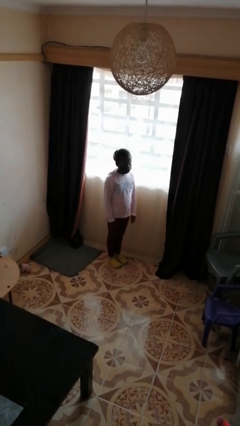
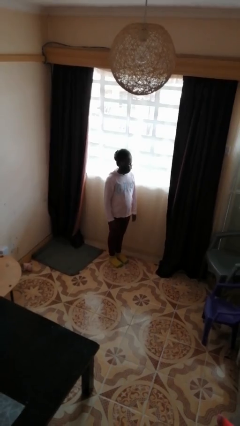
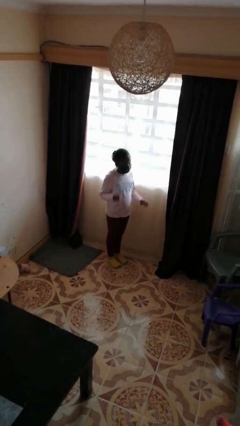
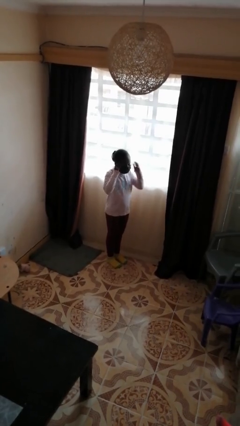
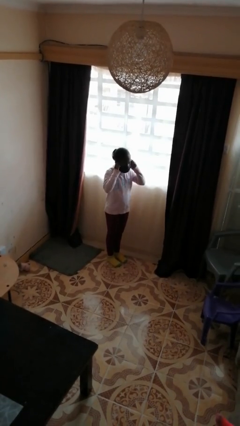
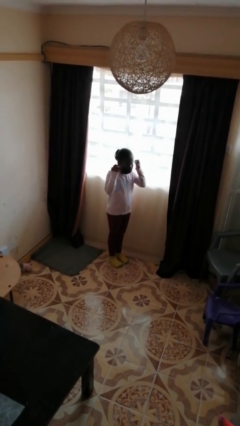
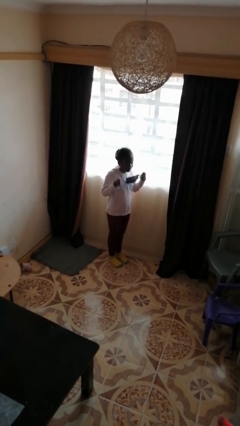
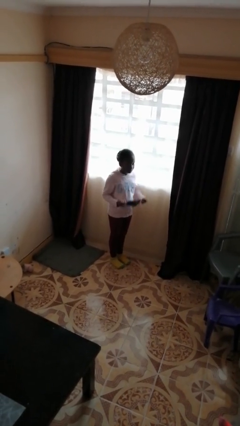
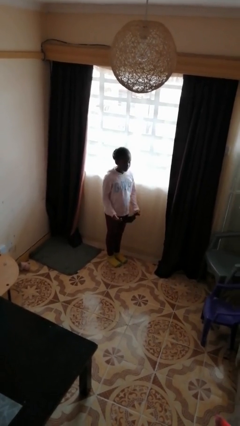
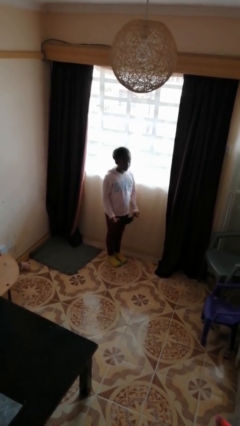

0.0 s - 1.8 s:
person takes off facemask

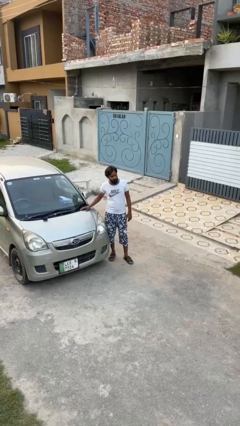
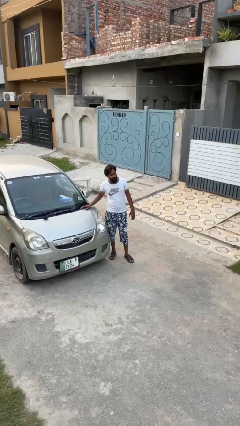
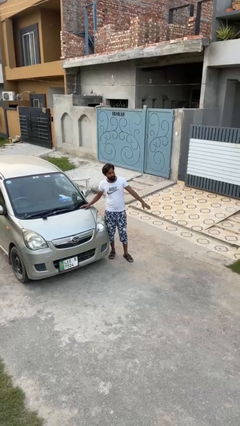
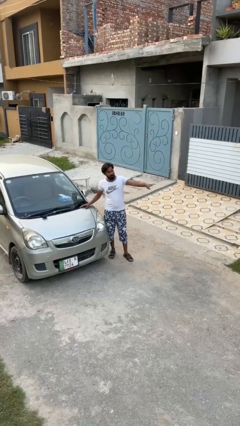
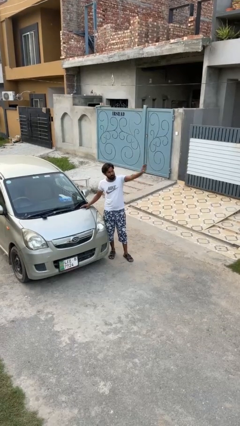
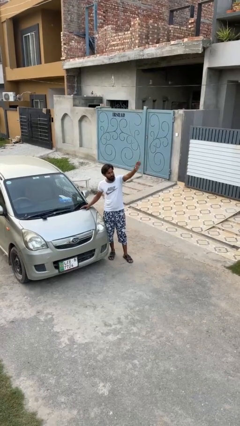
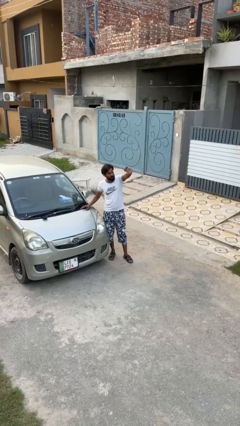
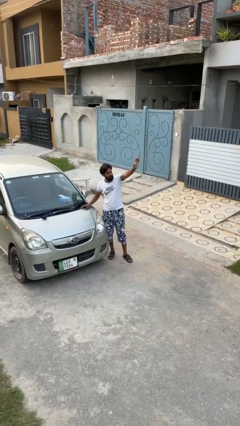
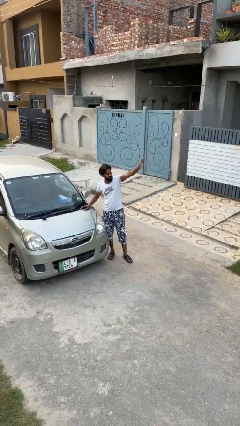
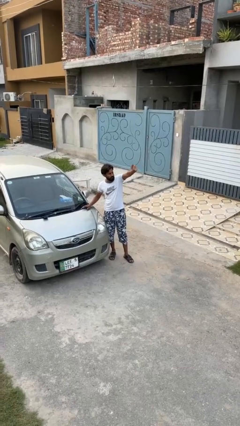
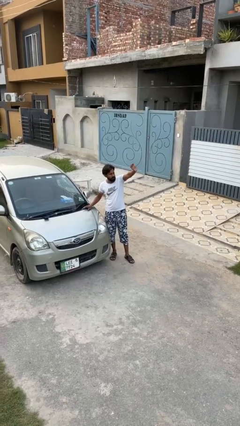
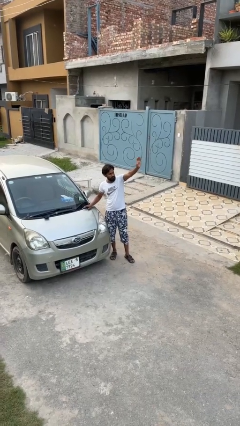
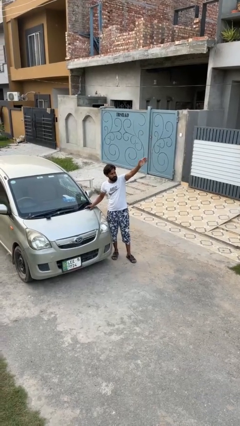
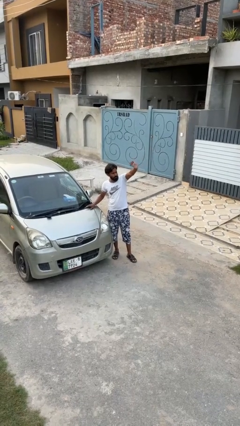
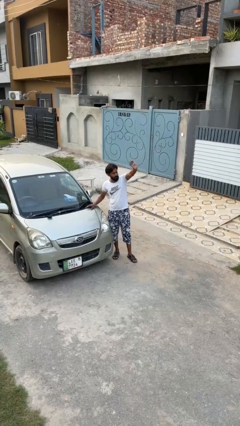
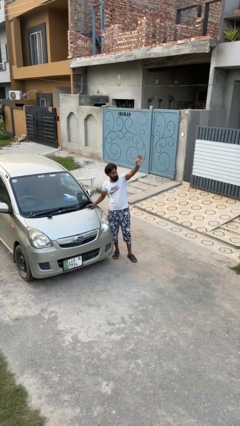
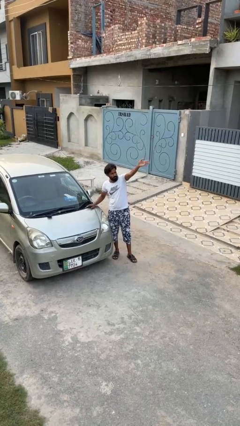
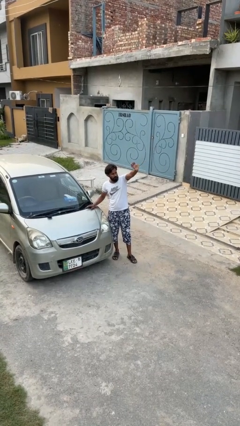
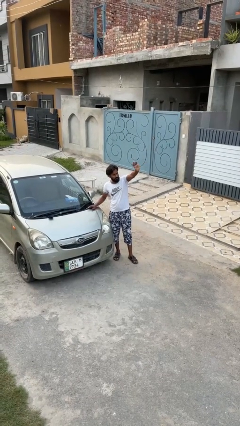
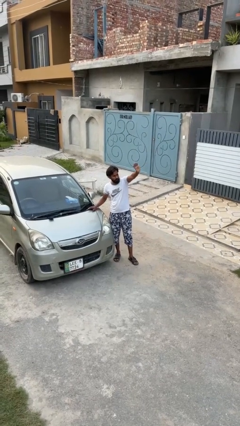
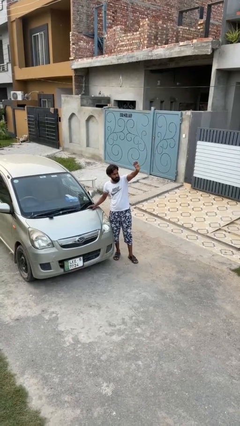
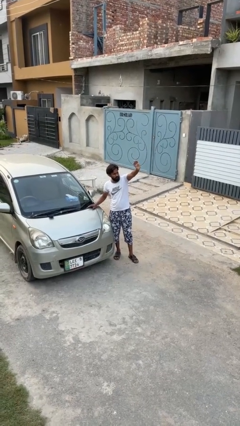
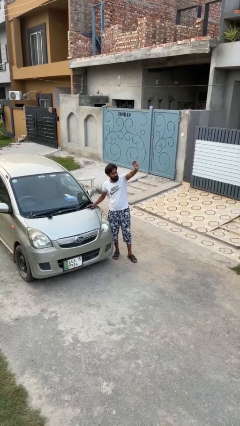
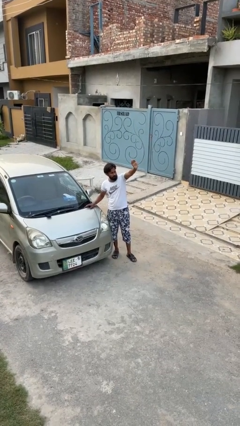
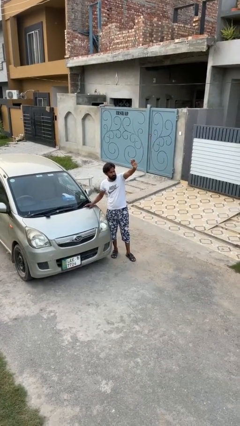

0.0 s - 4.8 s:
person waves at person

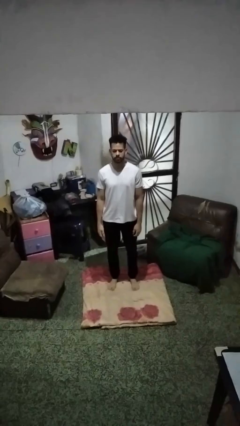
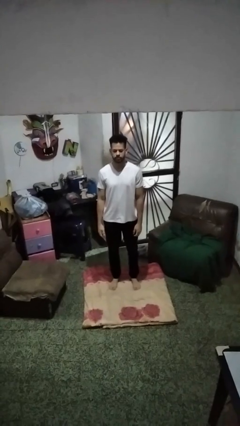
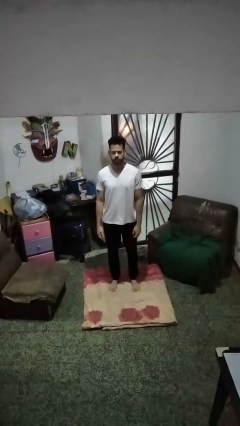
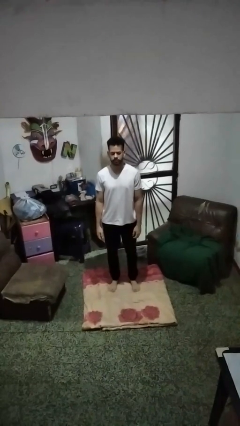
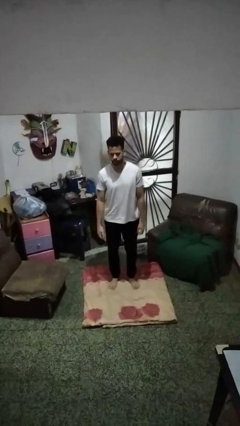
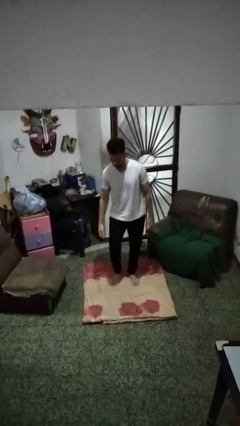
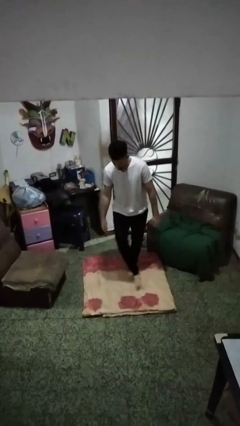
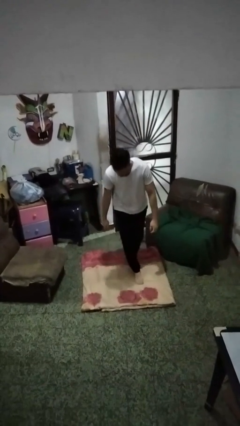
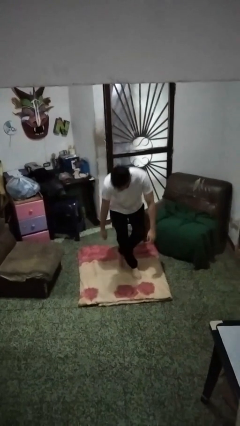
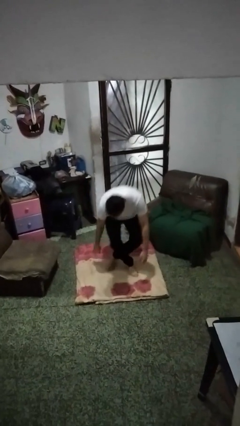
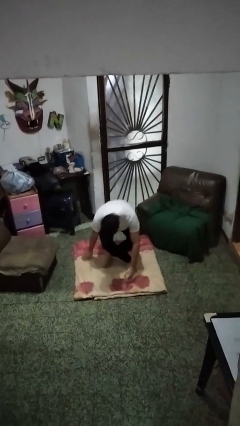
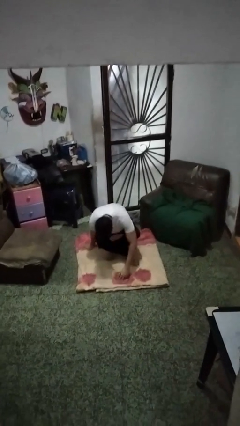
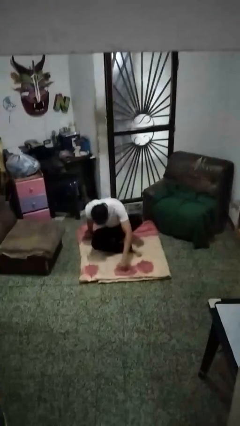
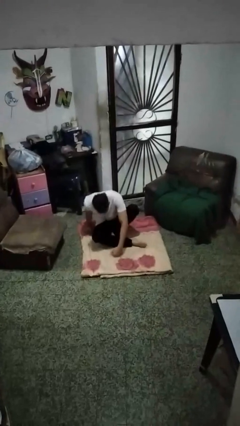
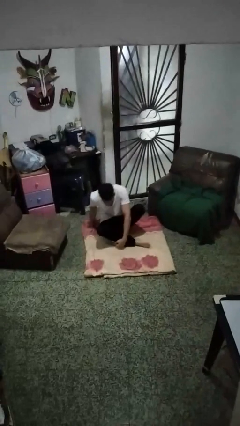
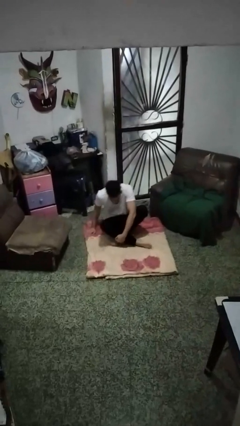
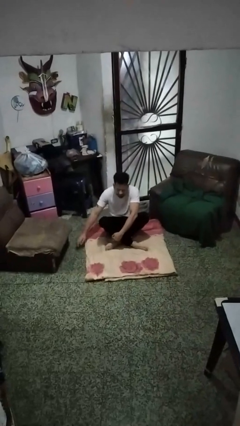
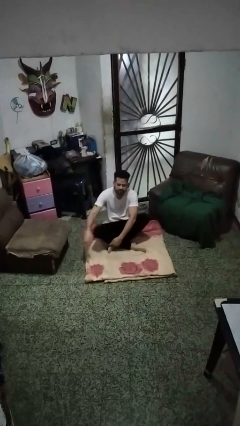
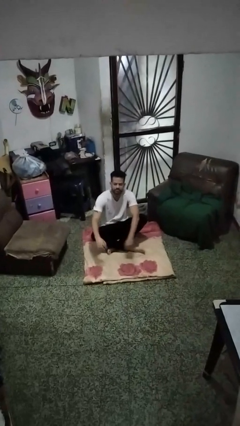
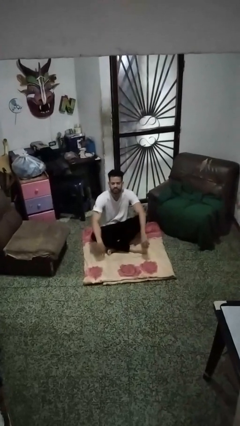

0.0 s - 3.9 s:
person sits crisscross

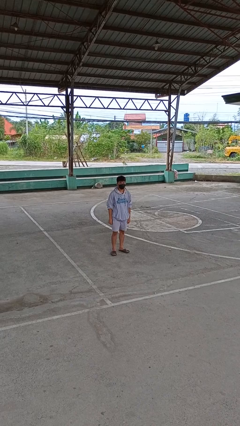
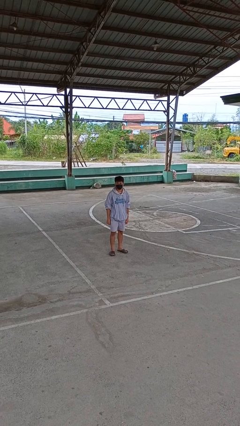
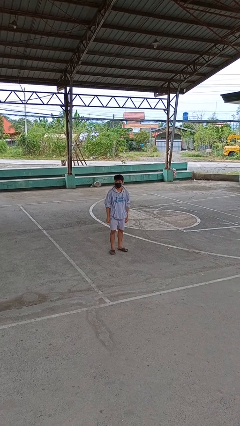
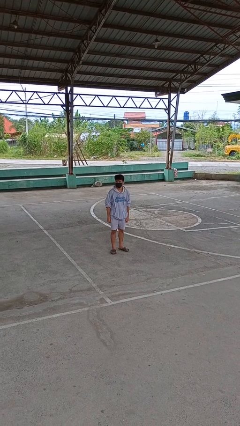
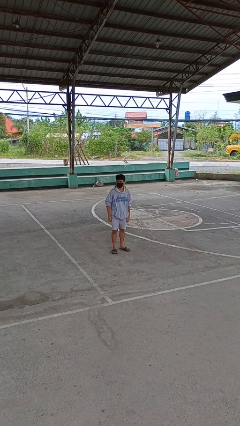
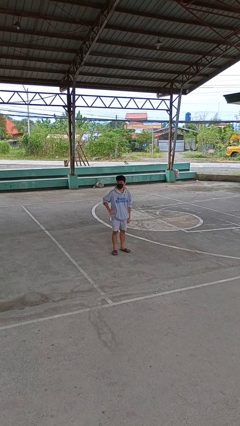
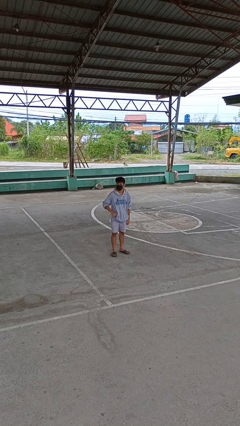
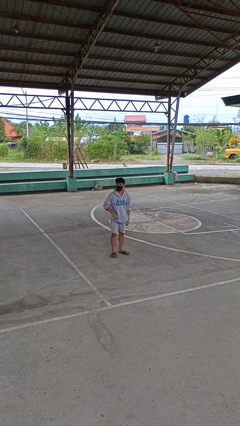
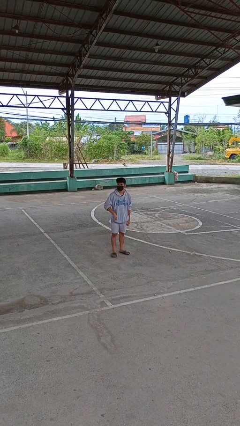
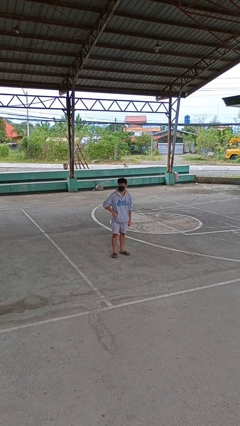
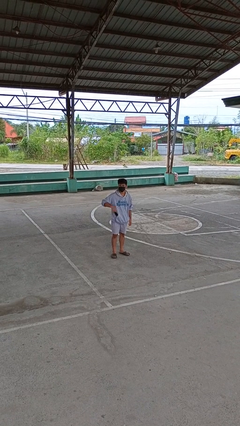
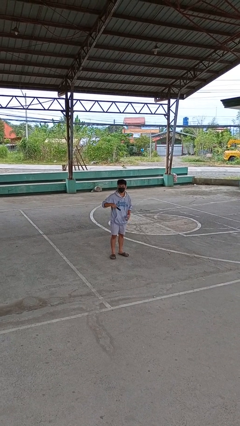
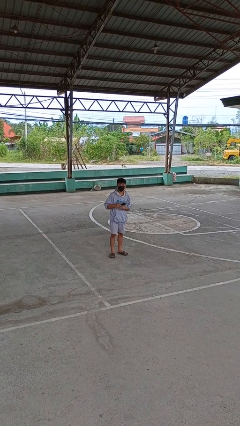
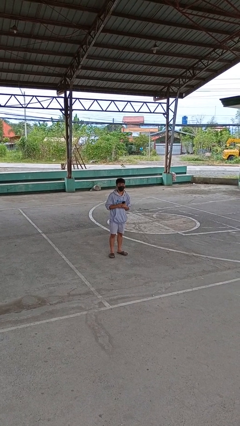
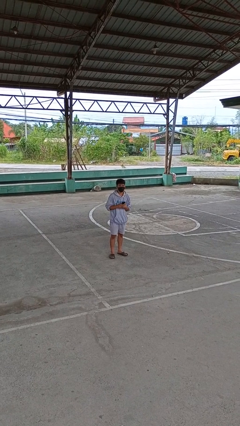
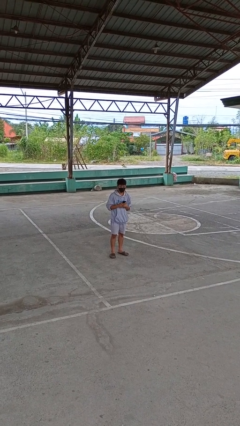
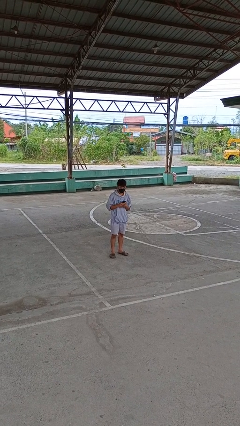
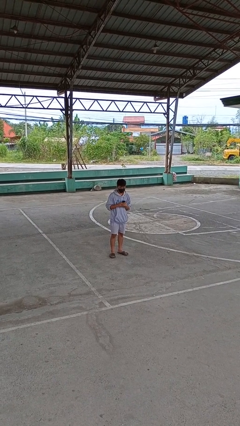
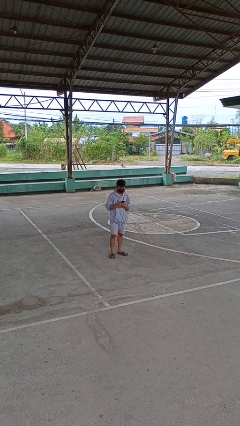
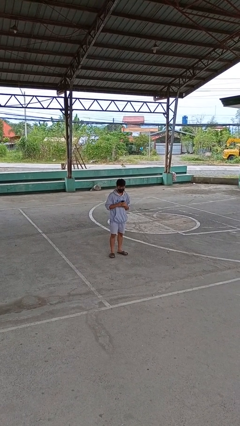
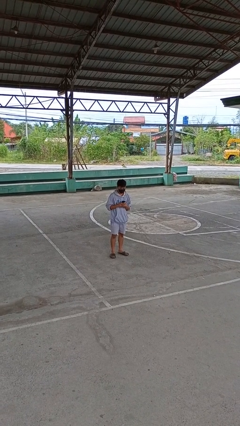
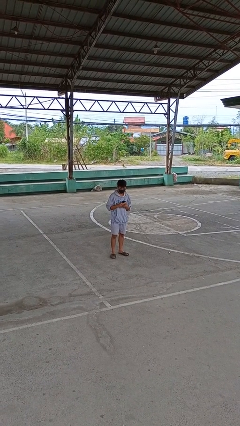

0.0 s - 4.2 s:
person takes phone from pocket

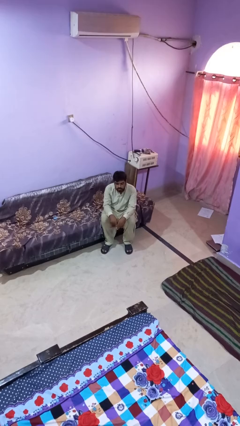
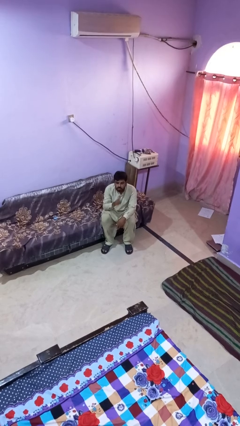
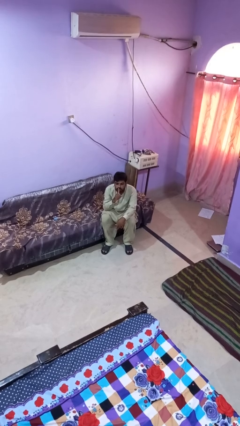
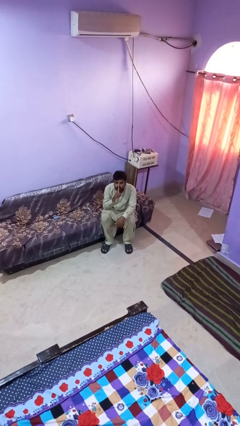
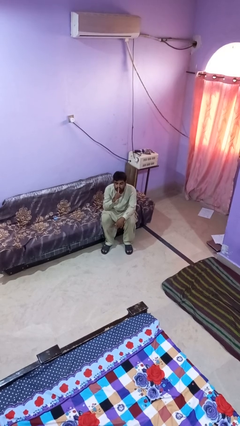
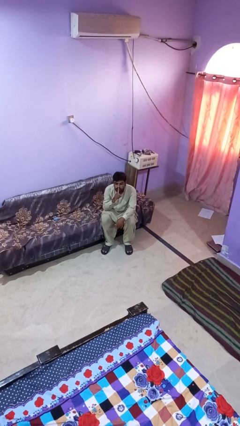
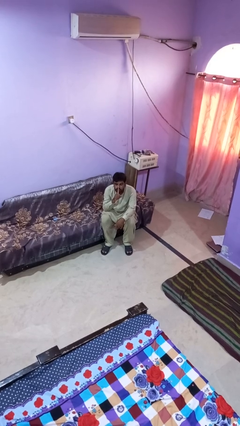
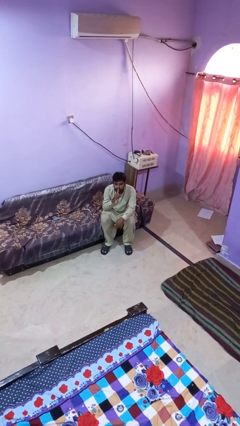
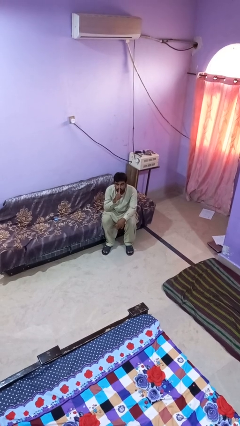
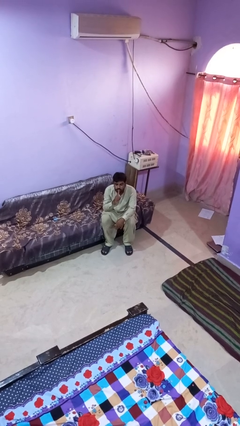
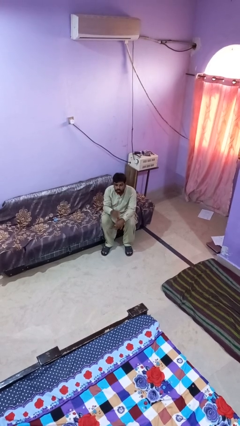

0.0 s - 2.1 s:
person gestures be quiet

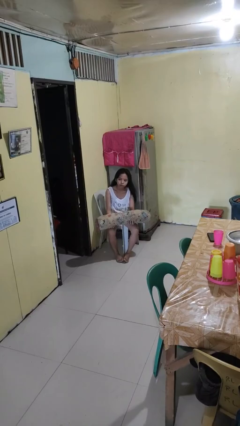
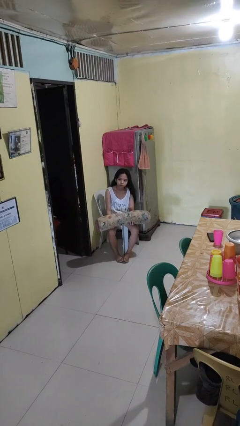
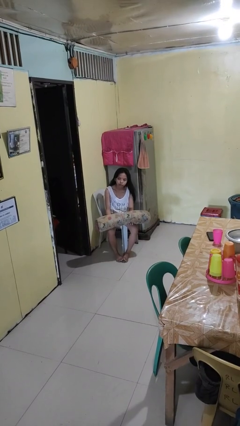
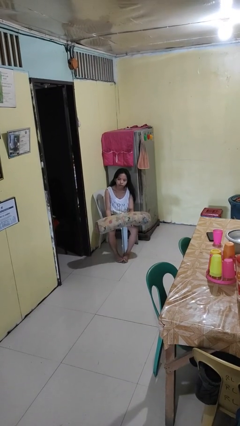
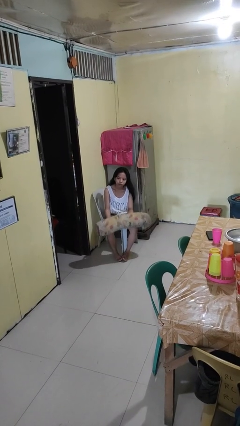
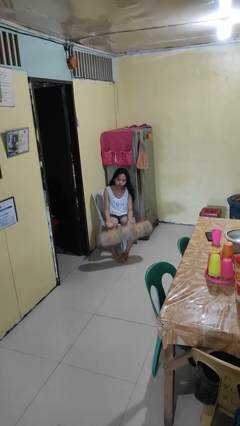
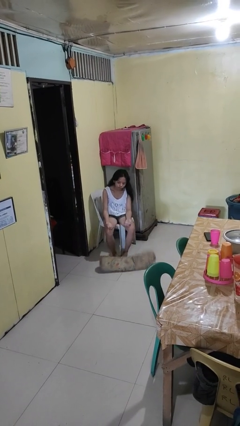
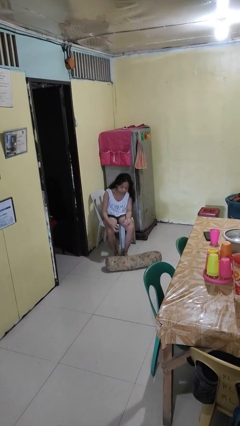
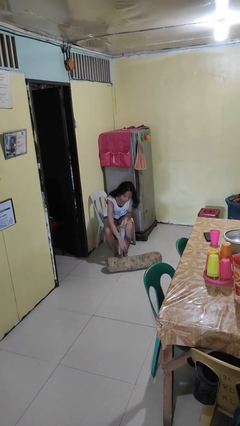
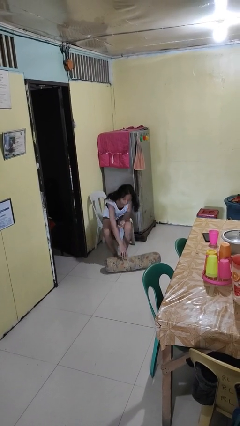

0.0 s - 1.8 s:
person drops object
